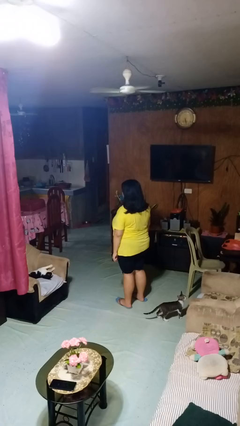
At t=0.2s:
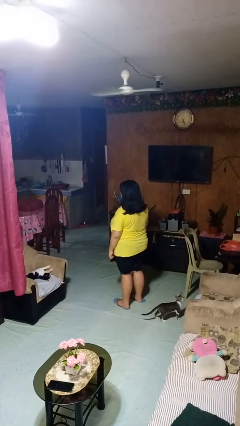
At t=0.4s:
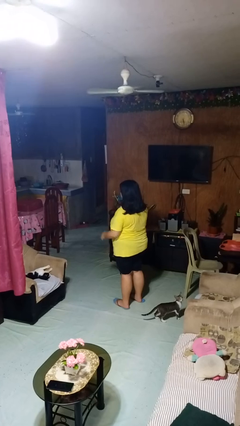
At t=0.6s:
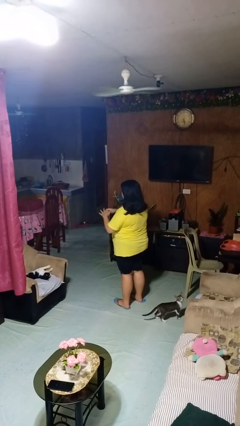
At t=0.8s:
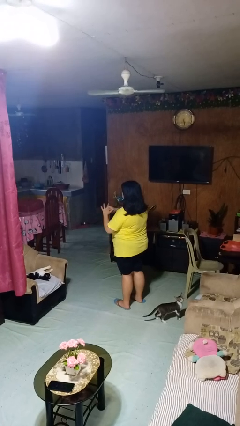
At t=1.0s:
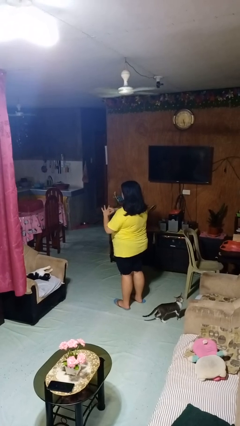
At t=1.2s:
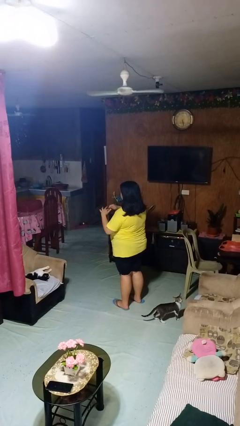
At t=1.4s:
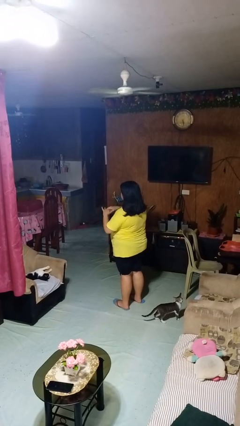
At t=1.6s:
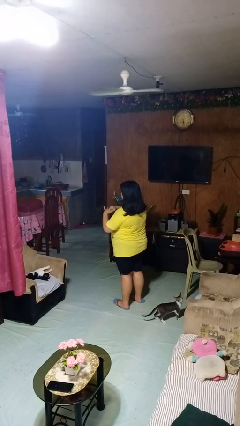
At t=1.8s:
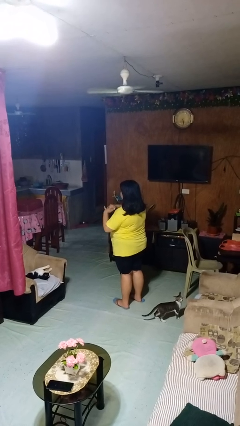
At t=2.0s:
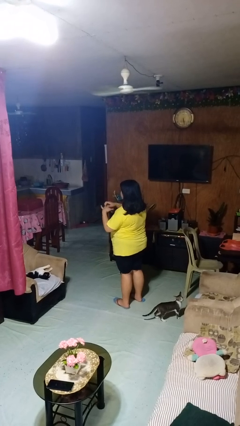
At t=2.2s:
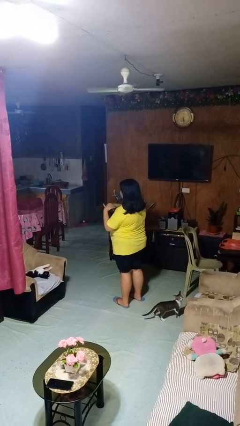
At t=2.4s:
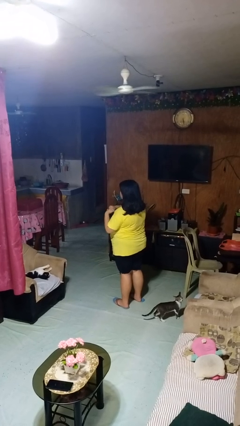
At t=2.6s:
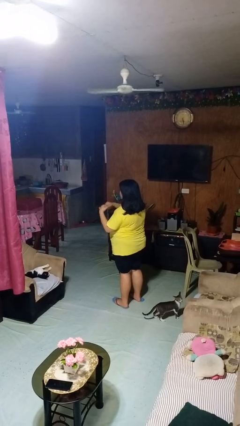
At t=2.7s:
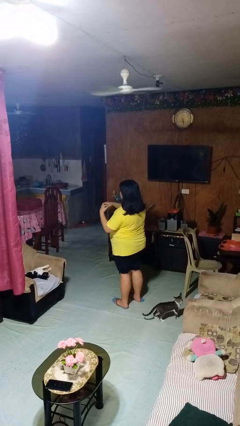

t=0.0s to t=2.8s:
person cracks knuckles

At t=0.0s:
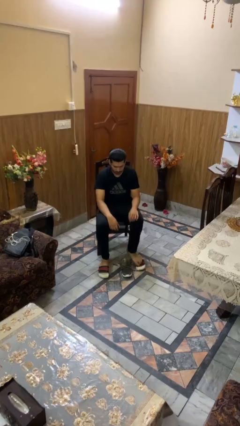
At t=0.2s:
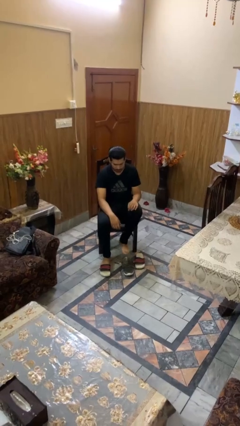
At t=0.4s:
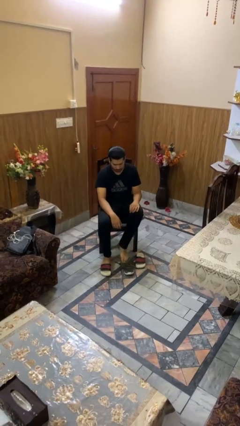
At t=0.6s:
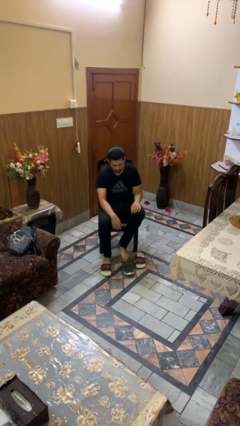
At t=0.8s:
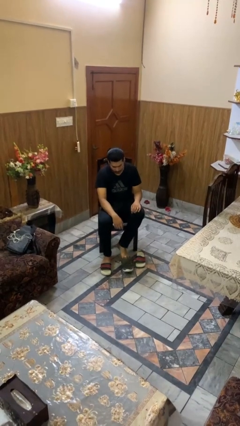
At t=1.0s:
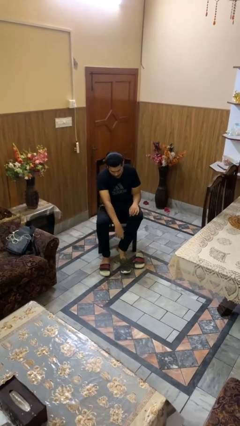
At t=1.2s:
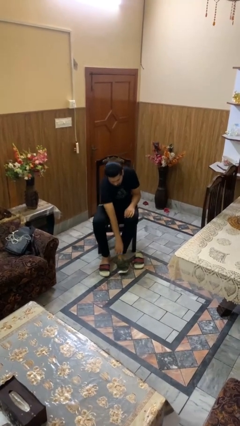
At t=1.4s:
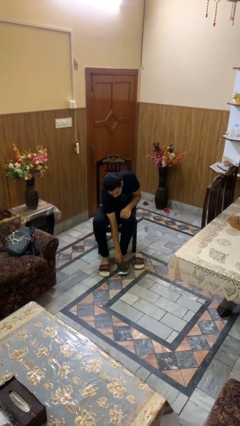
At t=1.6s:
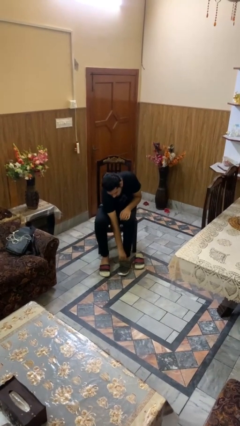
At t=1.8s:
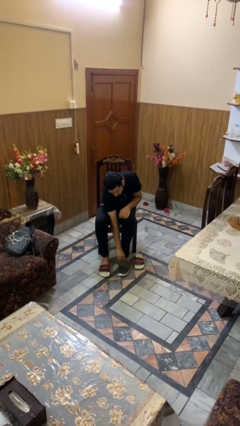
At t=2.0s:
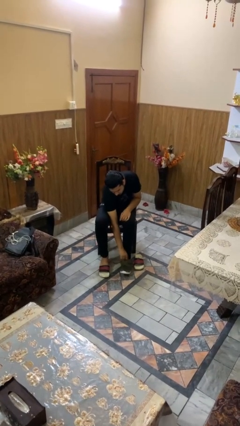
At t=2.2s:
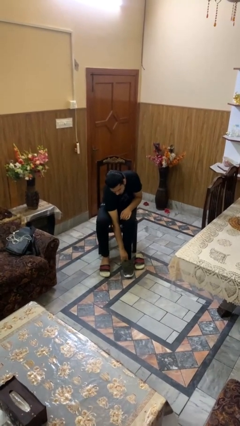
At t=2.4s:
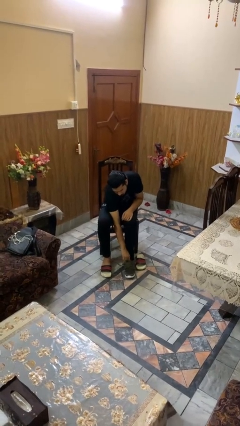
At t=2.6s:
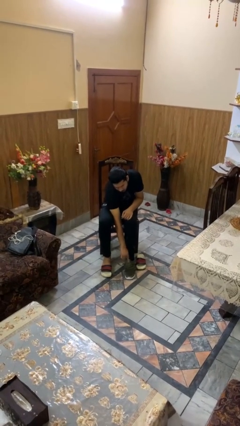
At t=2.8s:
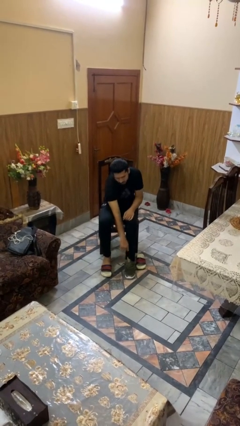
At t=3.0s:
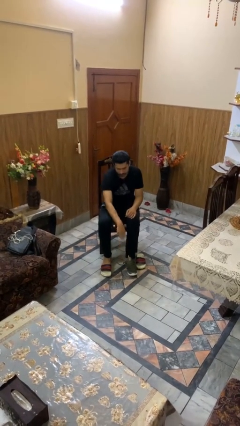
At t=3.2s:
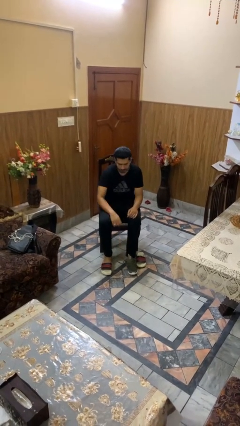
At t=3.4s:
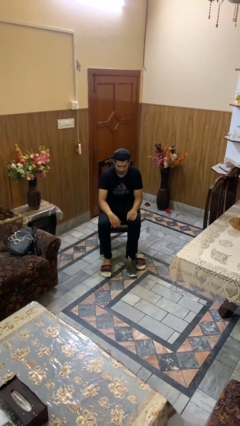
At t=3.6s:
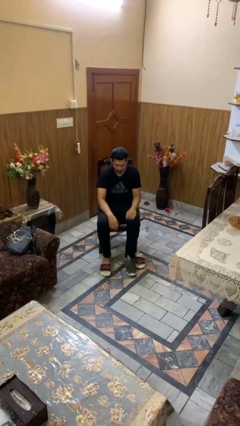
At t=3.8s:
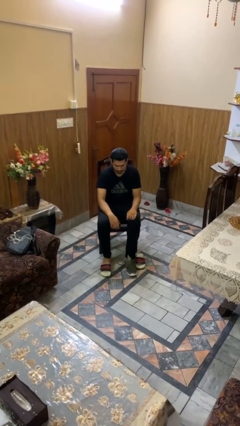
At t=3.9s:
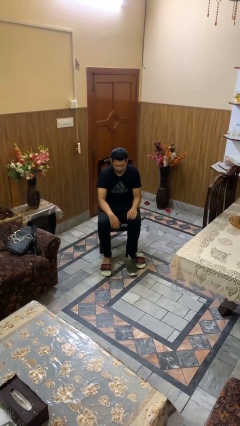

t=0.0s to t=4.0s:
person puts on shoes

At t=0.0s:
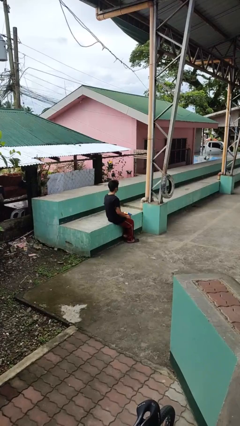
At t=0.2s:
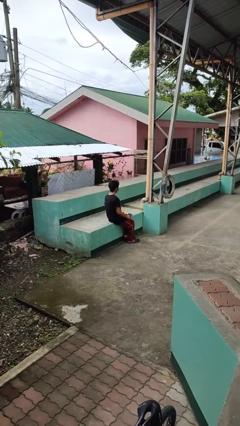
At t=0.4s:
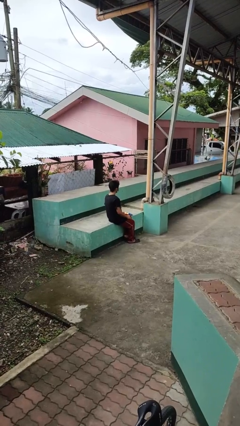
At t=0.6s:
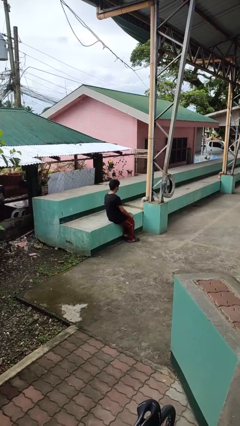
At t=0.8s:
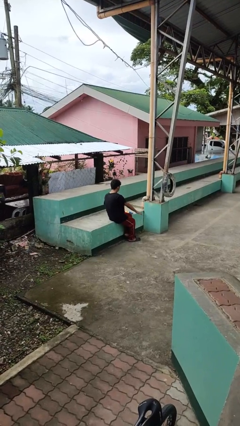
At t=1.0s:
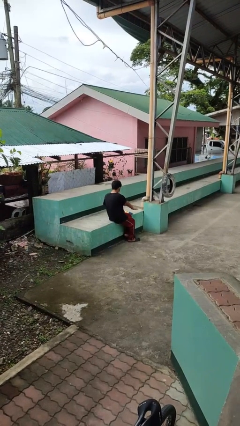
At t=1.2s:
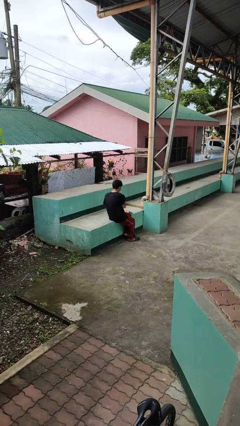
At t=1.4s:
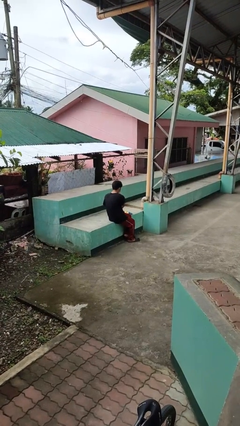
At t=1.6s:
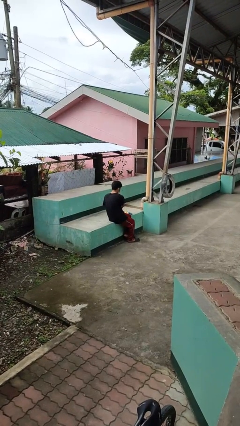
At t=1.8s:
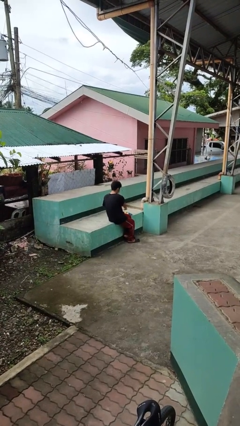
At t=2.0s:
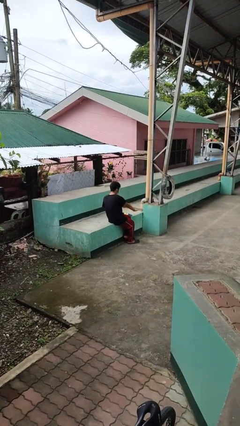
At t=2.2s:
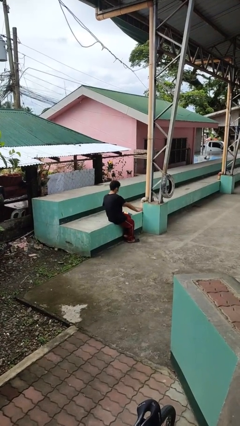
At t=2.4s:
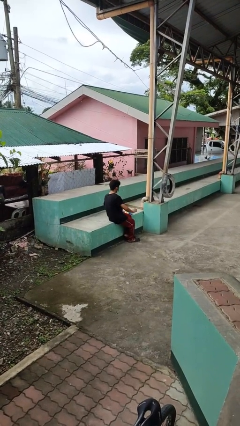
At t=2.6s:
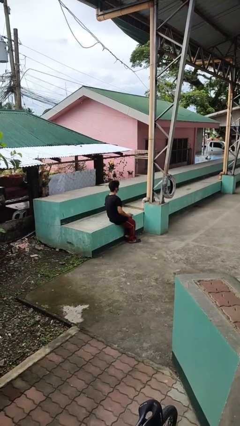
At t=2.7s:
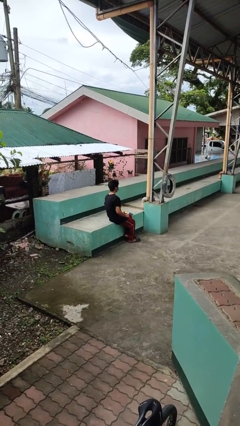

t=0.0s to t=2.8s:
person waves hand over object

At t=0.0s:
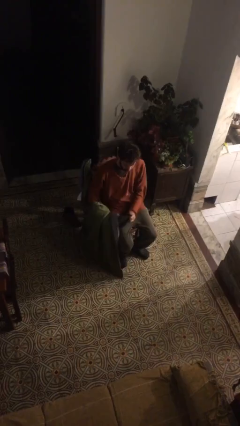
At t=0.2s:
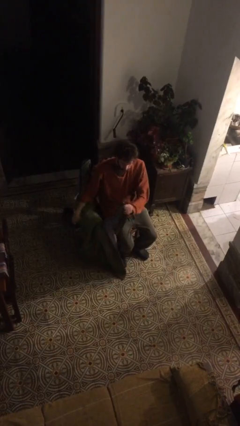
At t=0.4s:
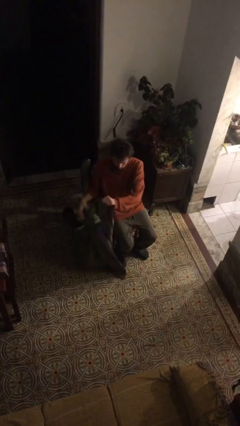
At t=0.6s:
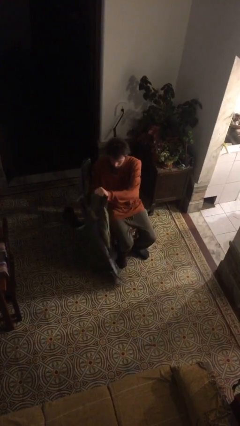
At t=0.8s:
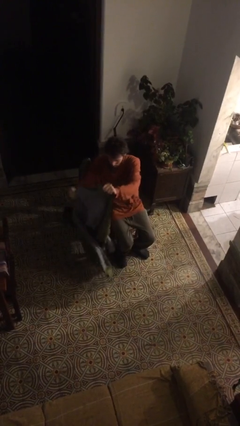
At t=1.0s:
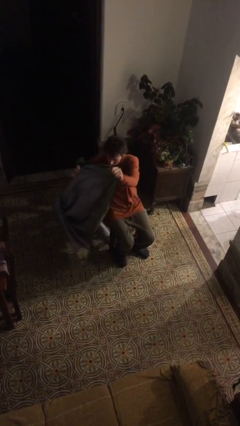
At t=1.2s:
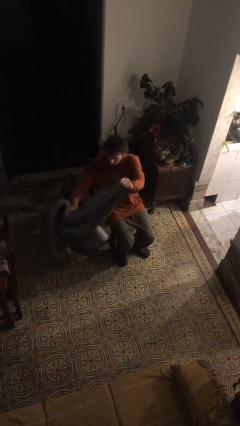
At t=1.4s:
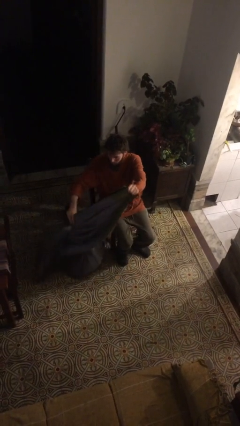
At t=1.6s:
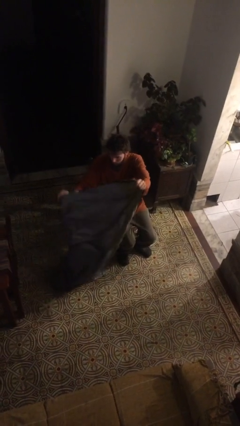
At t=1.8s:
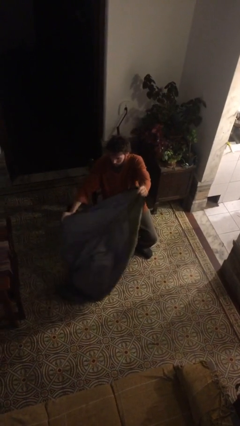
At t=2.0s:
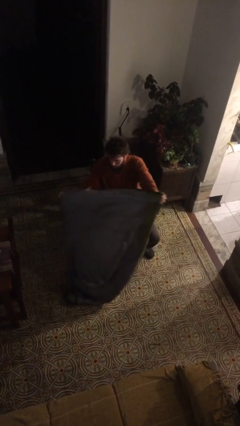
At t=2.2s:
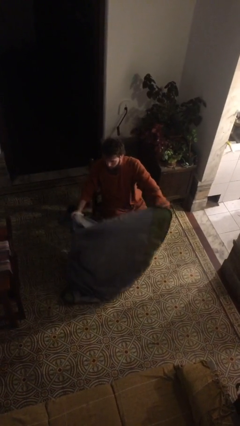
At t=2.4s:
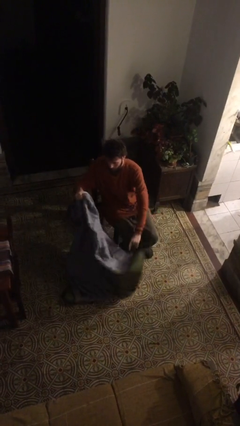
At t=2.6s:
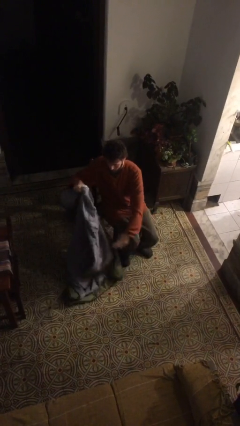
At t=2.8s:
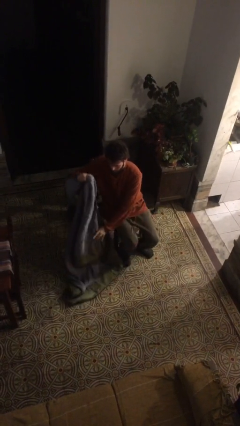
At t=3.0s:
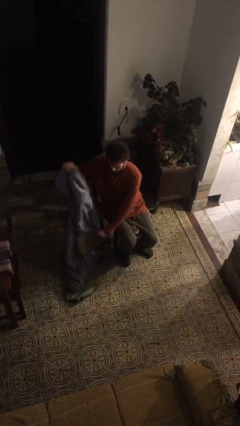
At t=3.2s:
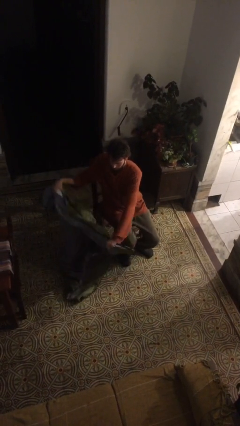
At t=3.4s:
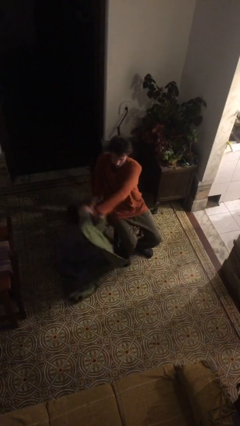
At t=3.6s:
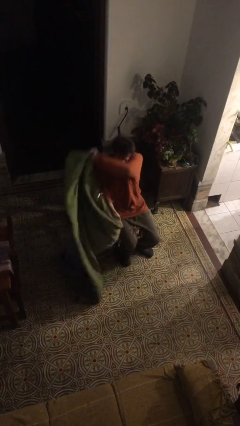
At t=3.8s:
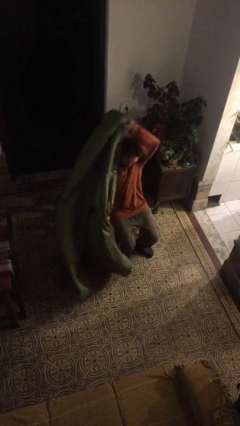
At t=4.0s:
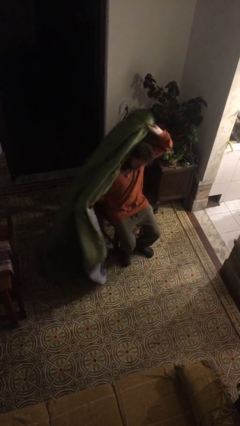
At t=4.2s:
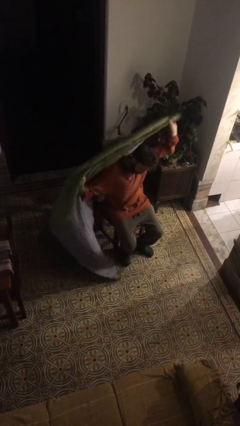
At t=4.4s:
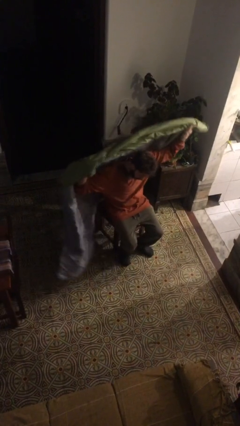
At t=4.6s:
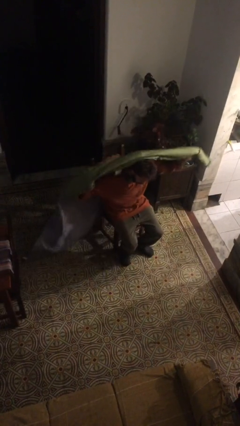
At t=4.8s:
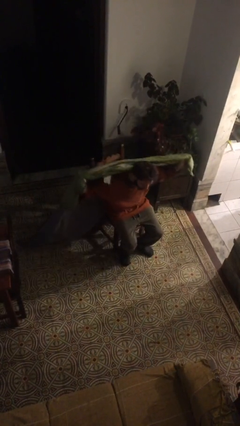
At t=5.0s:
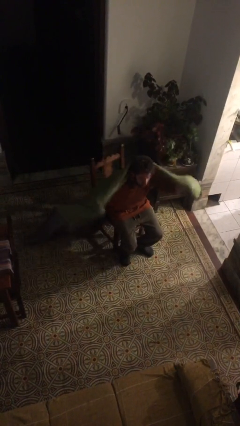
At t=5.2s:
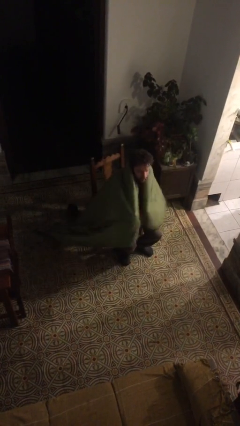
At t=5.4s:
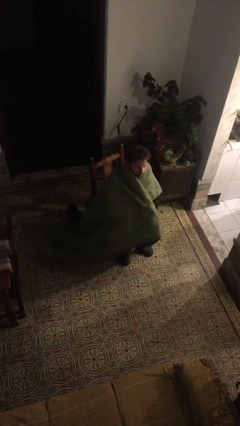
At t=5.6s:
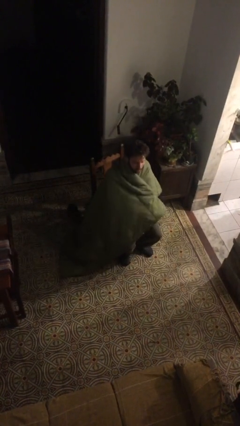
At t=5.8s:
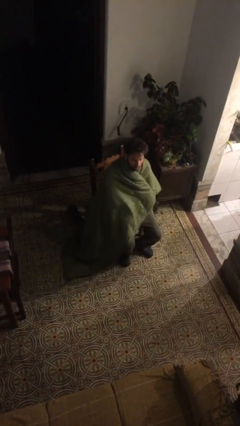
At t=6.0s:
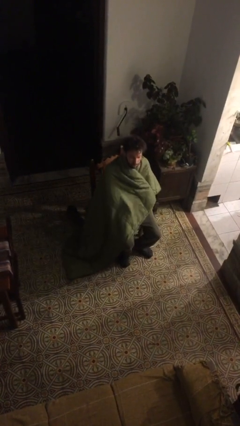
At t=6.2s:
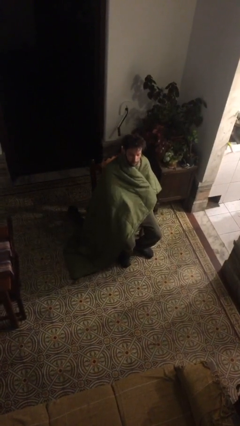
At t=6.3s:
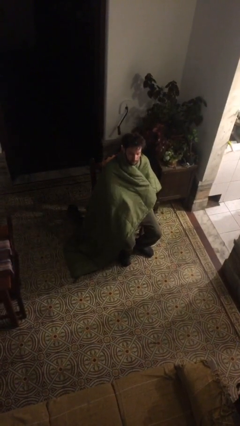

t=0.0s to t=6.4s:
person covers with blanket

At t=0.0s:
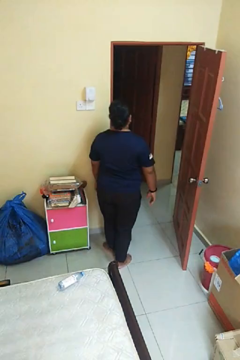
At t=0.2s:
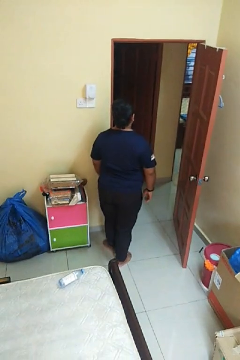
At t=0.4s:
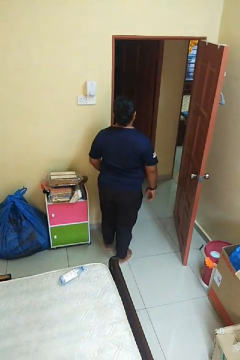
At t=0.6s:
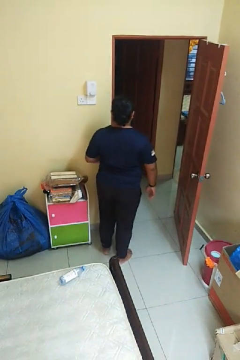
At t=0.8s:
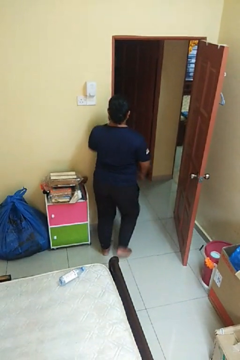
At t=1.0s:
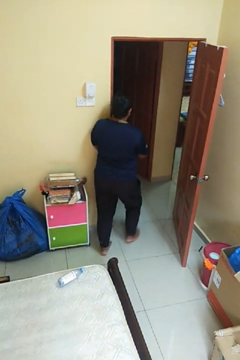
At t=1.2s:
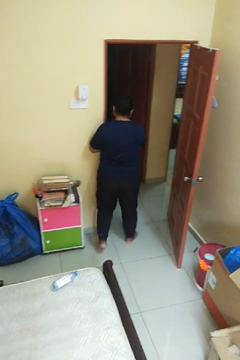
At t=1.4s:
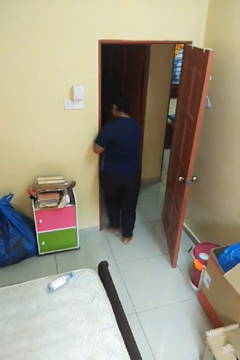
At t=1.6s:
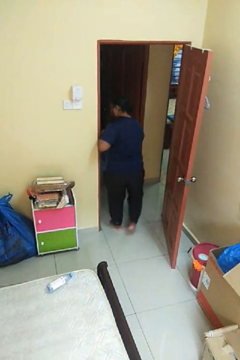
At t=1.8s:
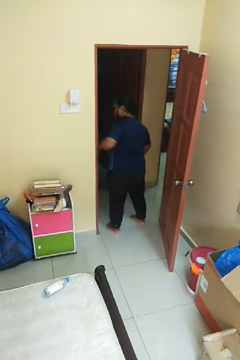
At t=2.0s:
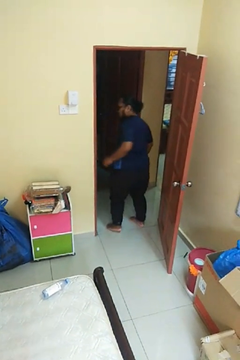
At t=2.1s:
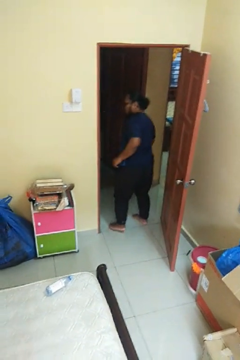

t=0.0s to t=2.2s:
person bumps into wall
